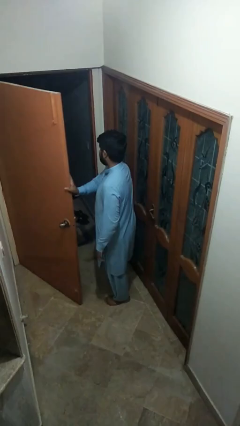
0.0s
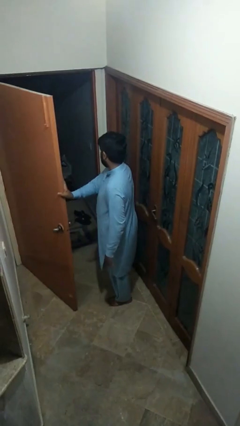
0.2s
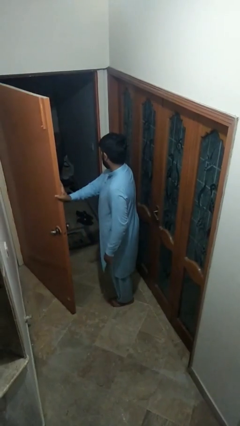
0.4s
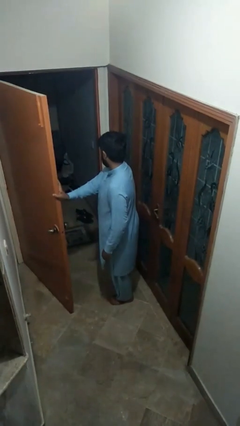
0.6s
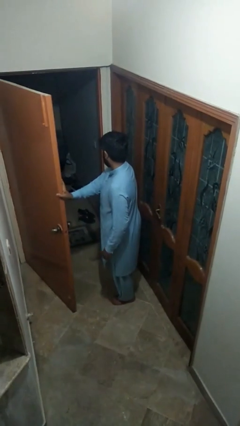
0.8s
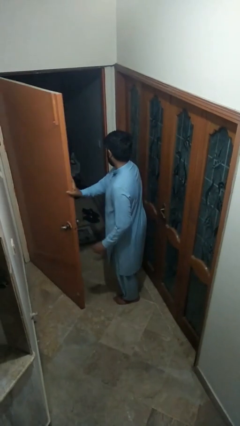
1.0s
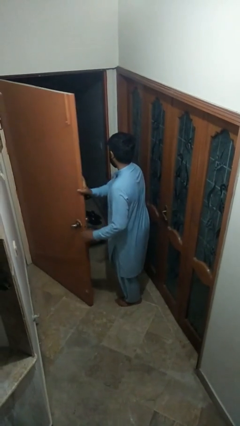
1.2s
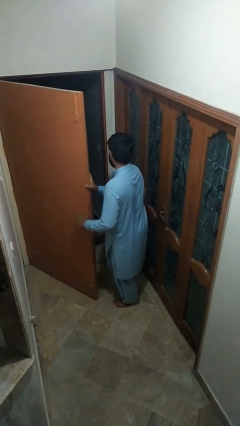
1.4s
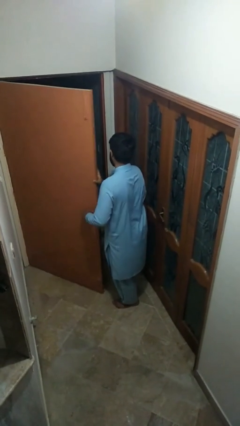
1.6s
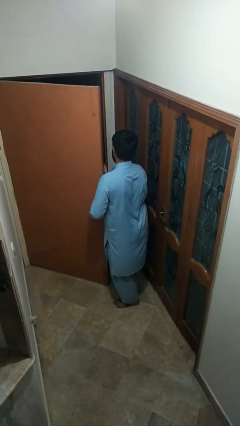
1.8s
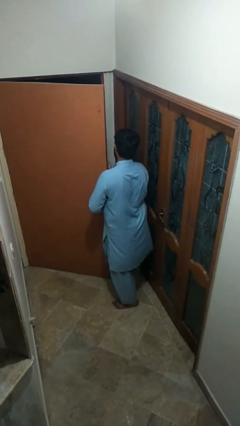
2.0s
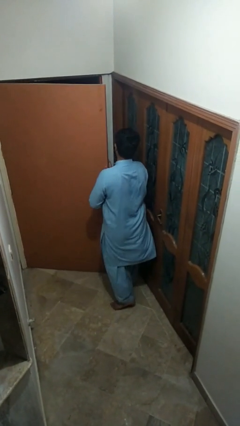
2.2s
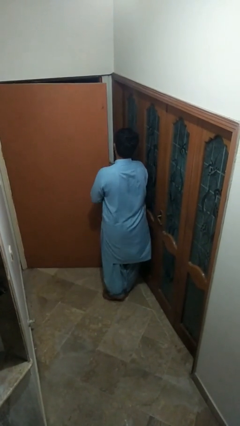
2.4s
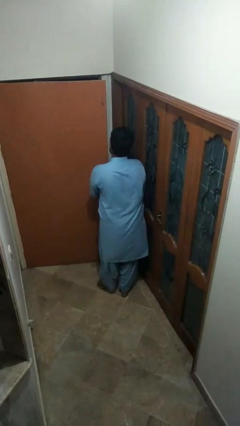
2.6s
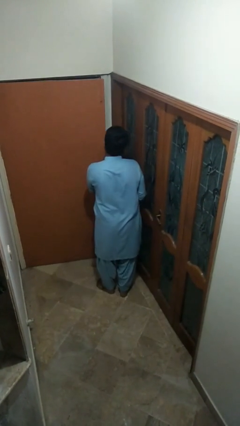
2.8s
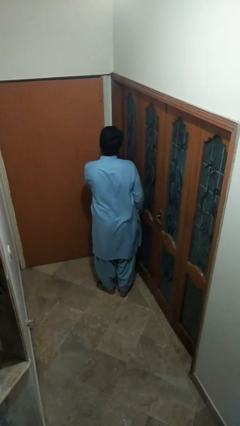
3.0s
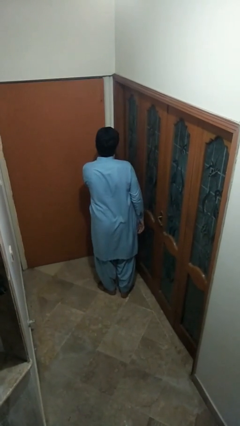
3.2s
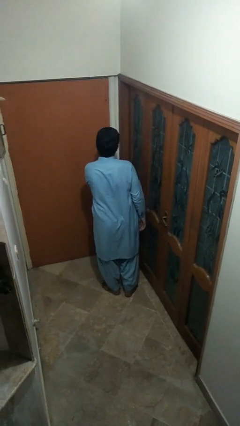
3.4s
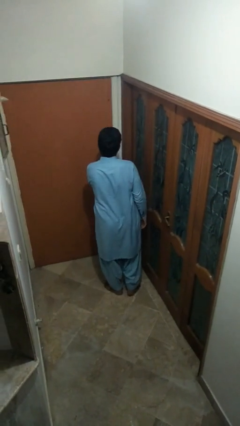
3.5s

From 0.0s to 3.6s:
person closes facility door

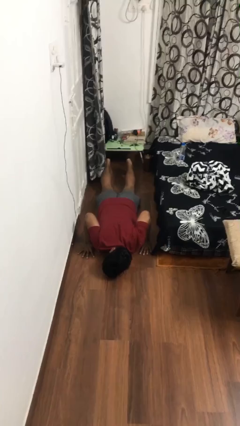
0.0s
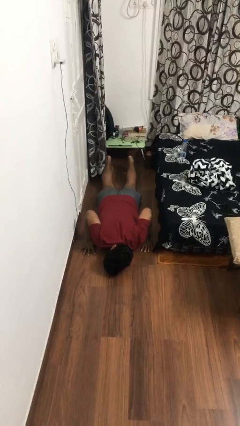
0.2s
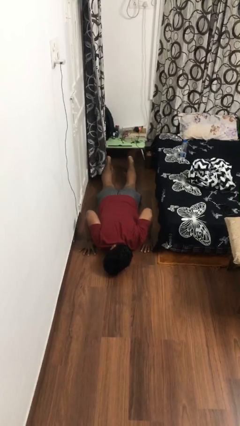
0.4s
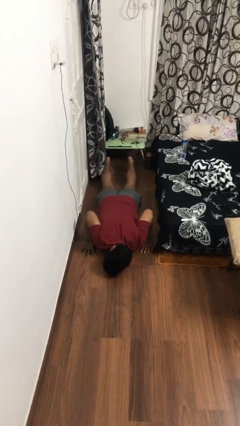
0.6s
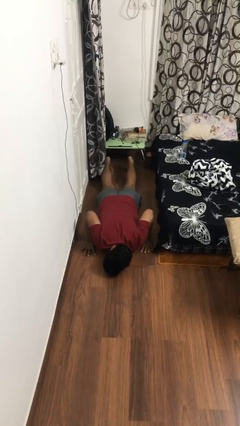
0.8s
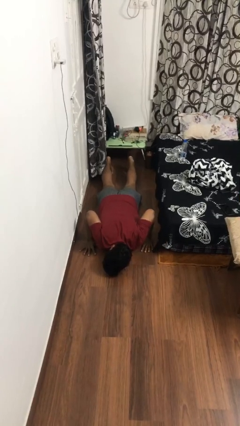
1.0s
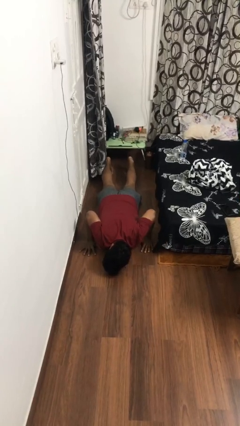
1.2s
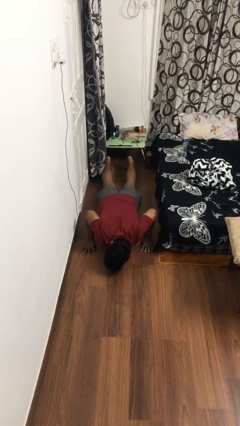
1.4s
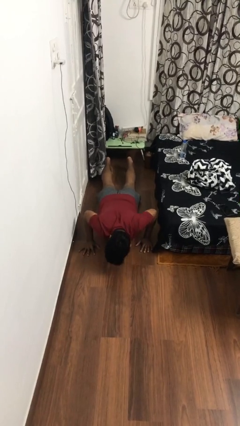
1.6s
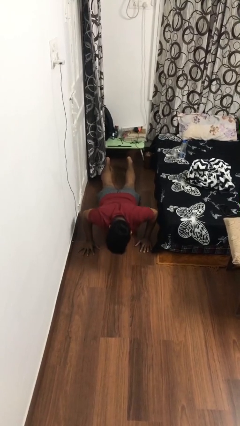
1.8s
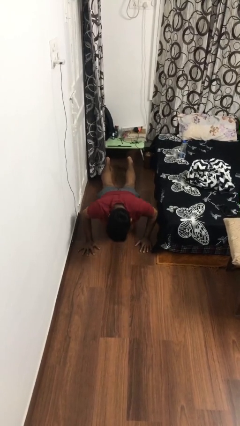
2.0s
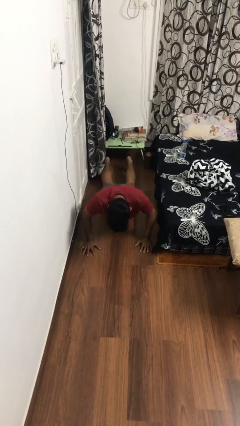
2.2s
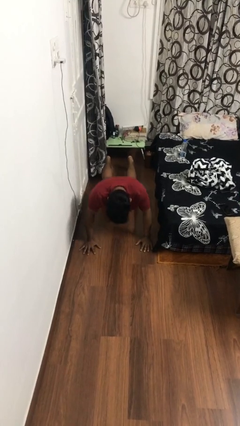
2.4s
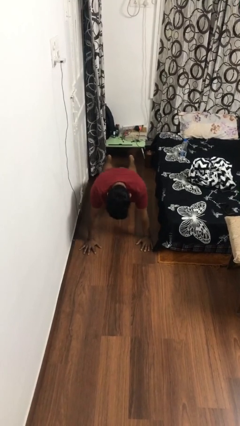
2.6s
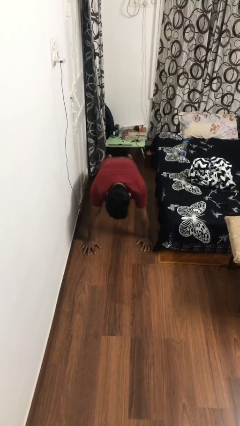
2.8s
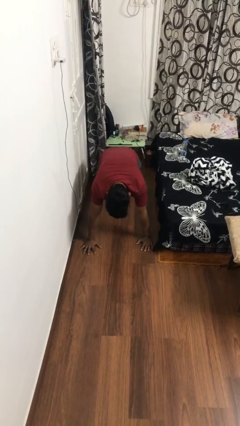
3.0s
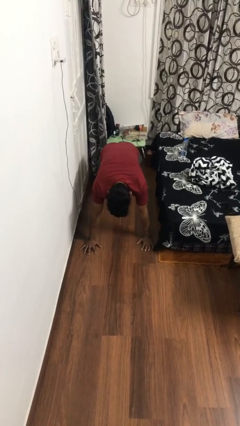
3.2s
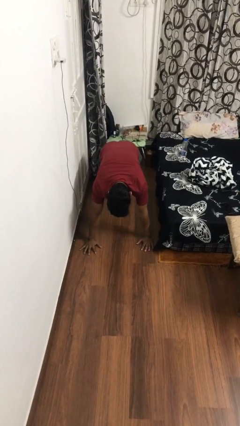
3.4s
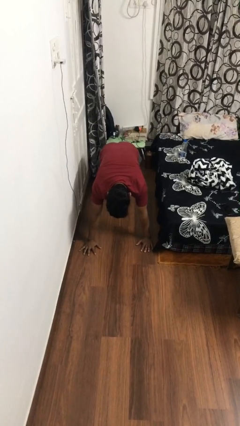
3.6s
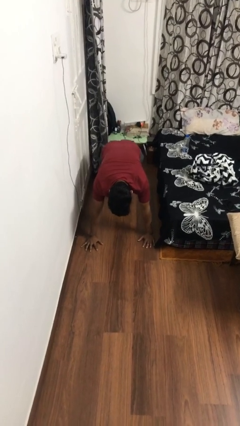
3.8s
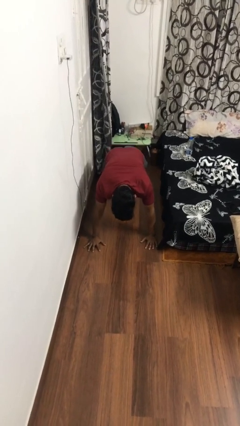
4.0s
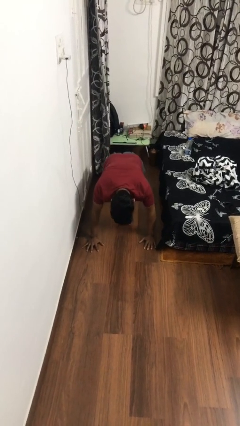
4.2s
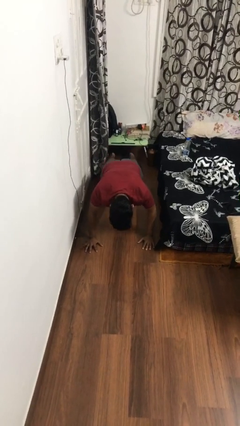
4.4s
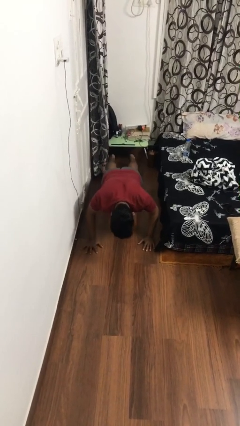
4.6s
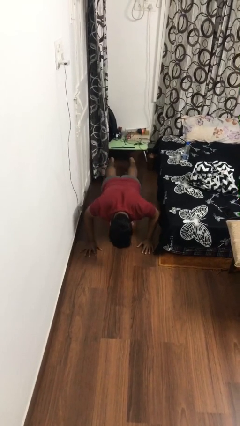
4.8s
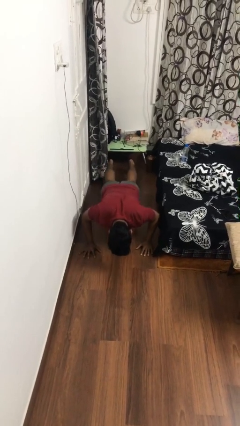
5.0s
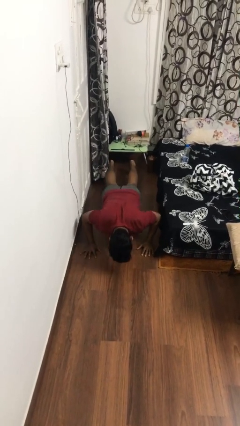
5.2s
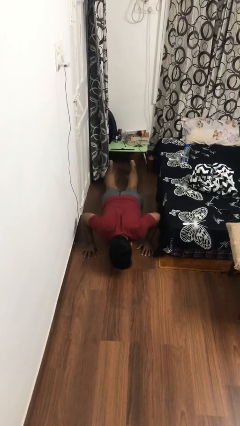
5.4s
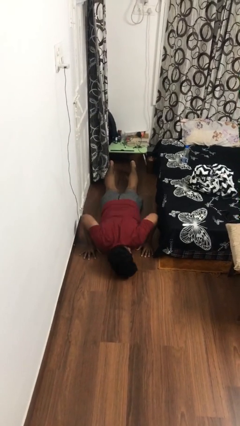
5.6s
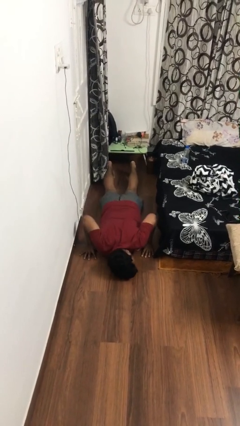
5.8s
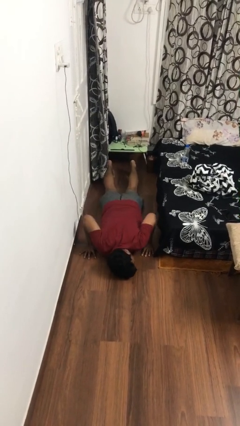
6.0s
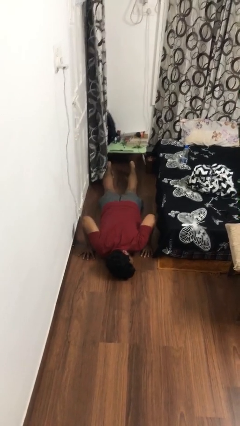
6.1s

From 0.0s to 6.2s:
person exercises with pushup

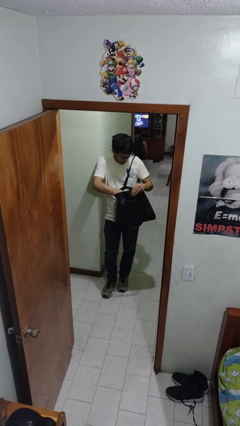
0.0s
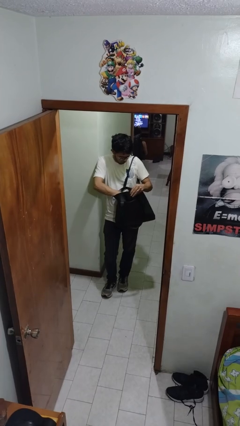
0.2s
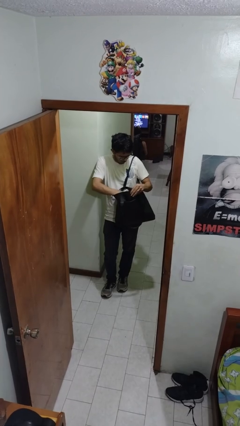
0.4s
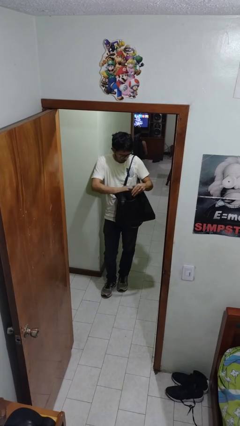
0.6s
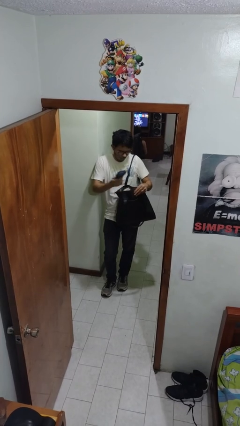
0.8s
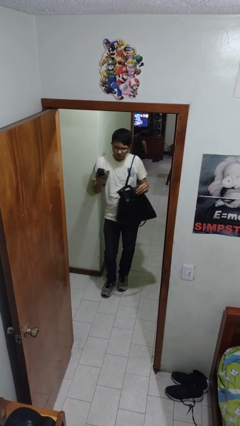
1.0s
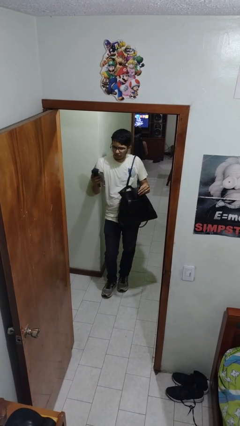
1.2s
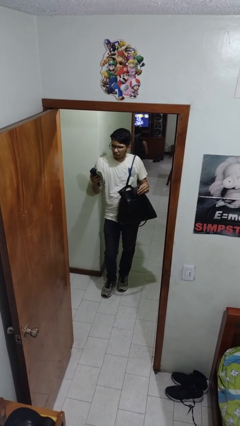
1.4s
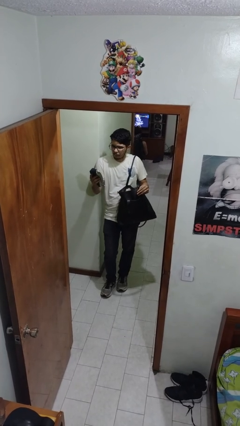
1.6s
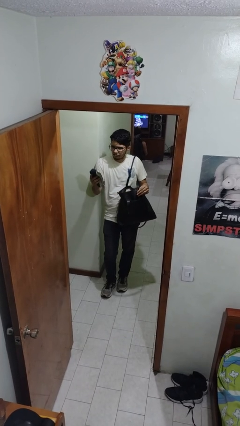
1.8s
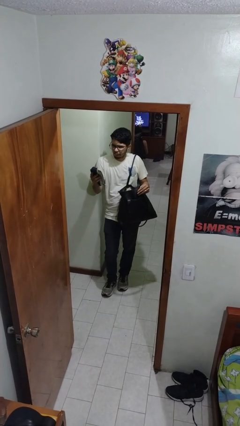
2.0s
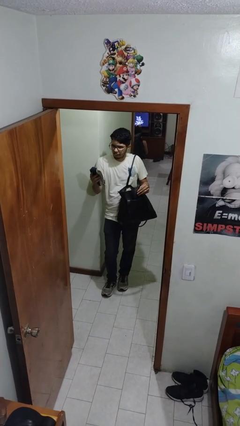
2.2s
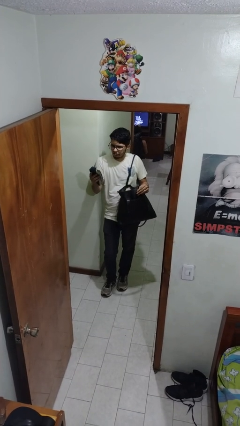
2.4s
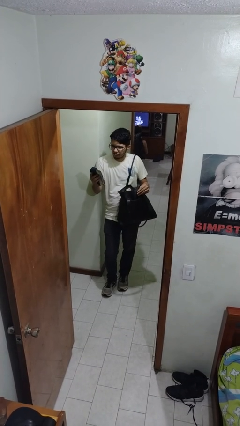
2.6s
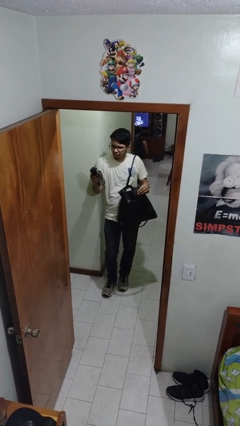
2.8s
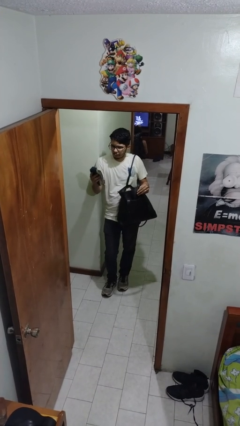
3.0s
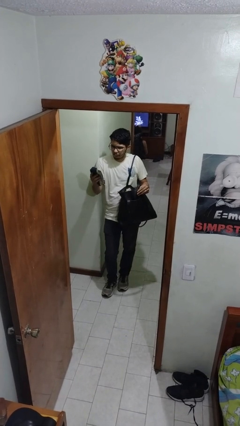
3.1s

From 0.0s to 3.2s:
person takes object from purse

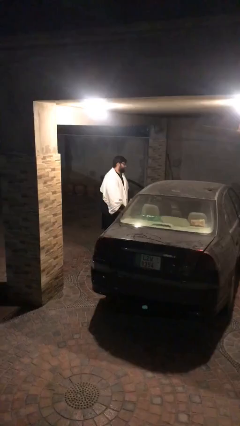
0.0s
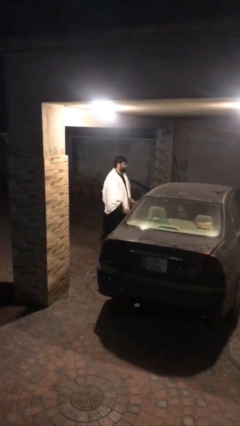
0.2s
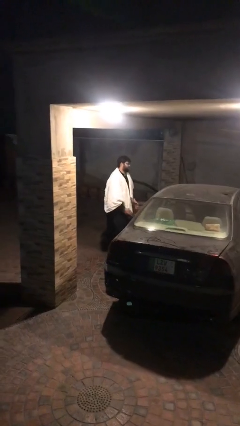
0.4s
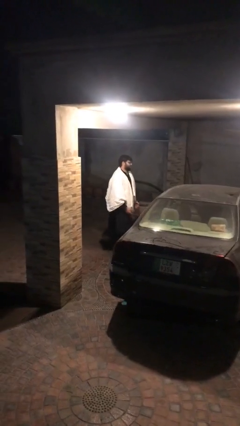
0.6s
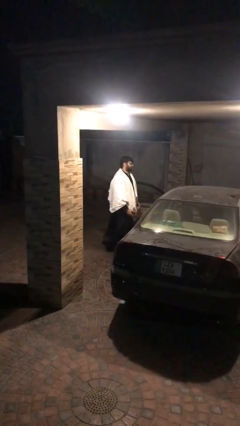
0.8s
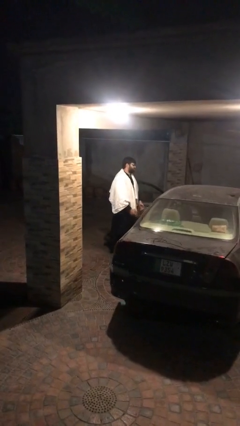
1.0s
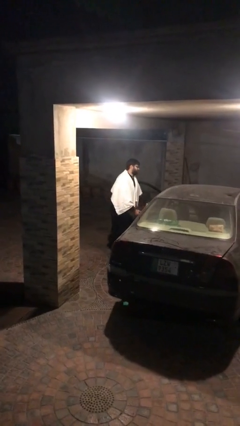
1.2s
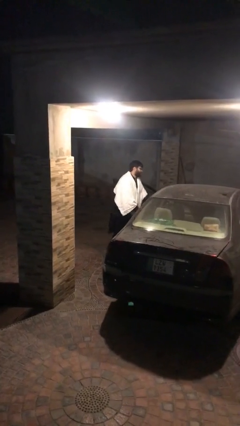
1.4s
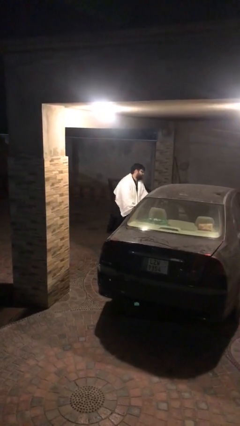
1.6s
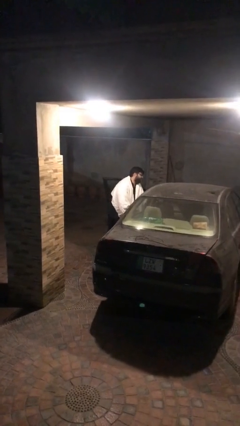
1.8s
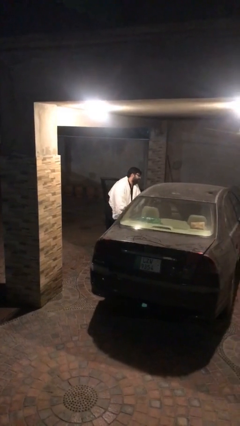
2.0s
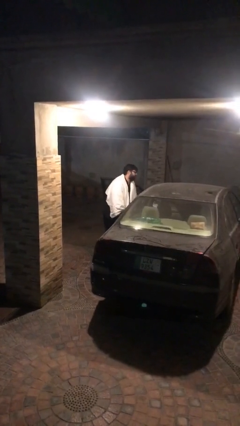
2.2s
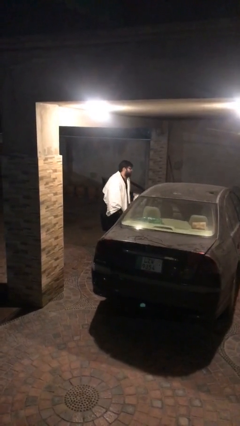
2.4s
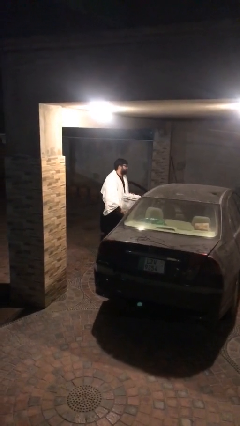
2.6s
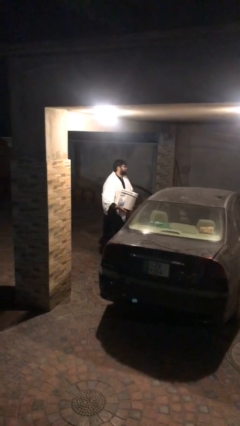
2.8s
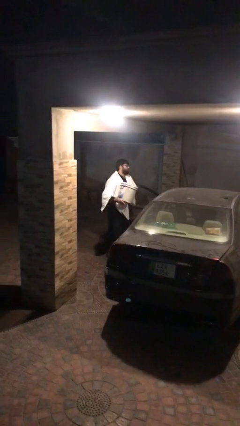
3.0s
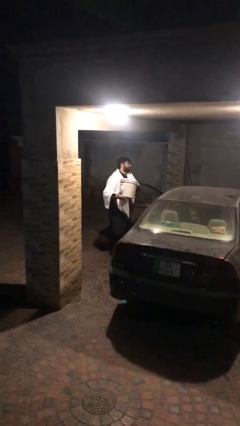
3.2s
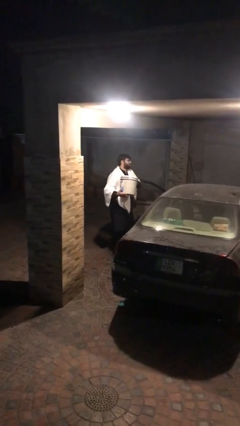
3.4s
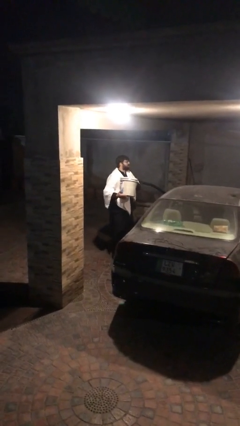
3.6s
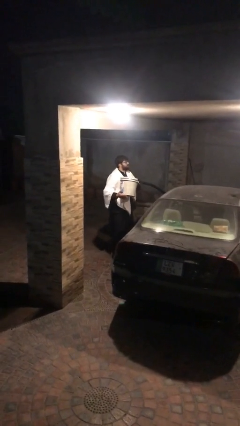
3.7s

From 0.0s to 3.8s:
person unloads car

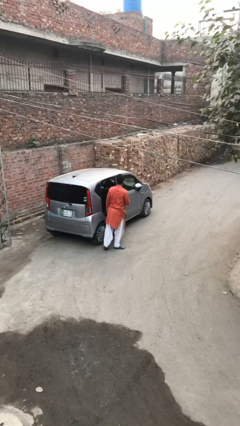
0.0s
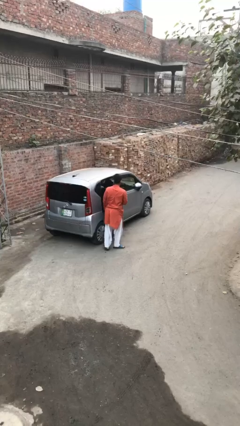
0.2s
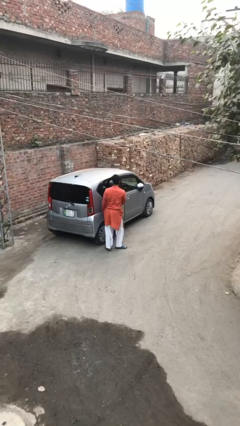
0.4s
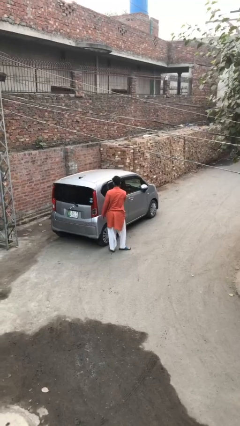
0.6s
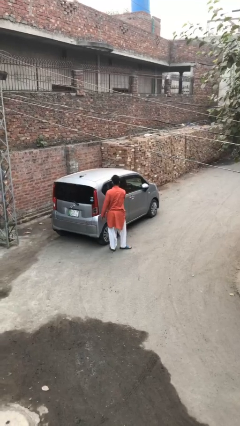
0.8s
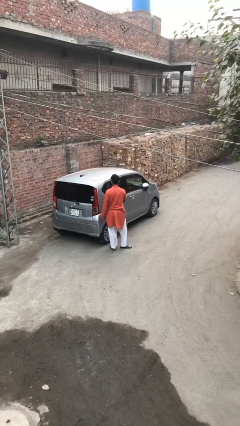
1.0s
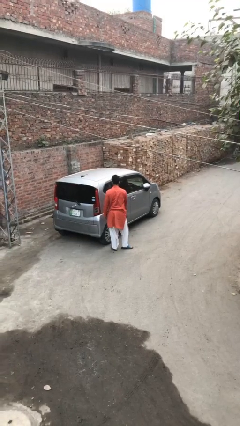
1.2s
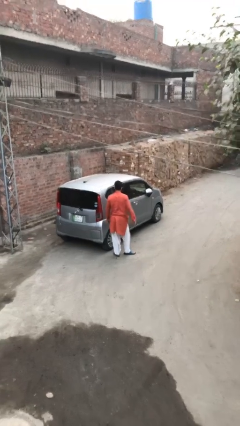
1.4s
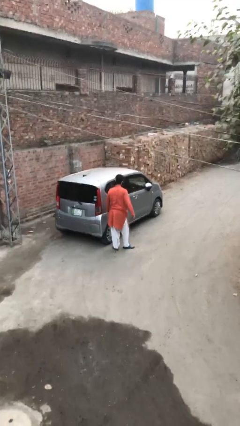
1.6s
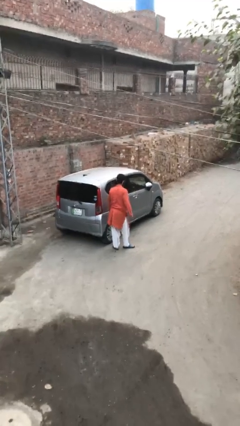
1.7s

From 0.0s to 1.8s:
person closes car door
